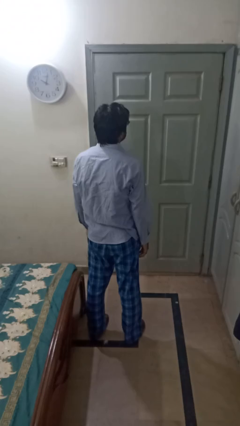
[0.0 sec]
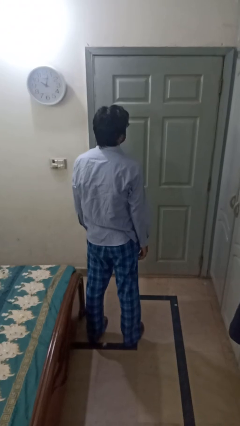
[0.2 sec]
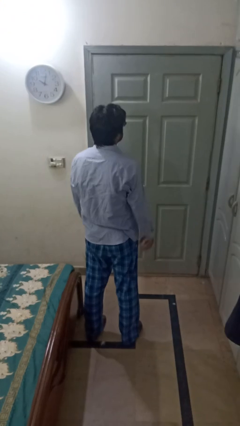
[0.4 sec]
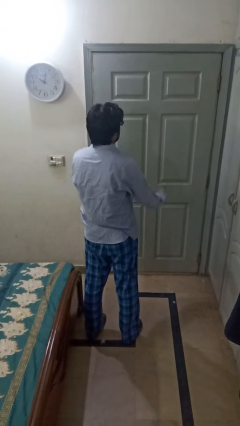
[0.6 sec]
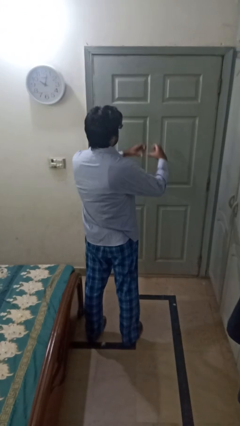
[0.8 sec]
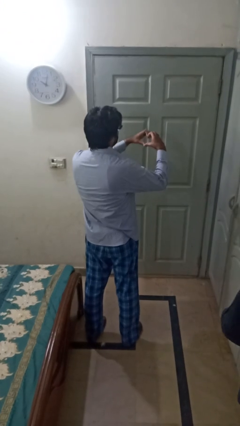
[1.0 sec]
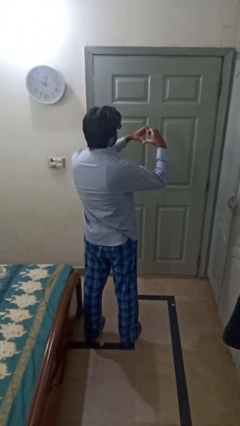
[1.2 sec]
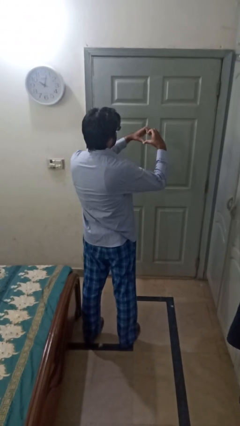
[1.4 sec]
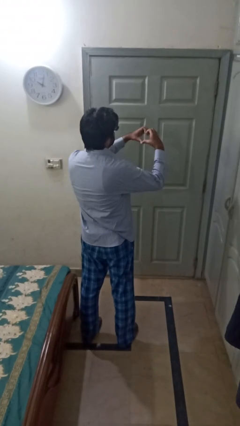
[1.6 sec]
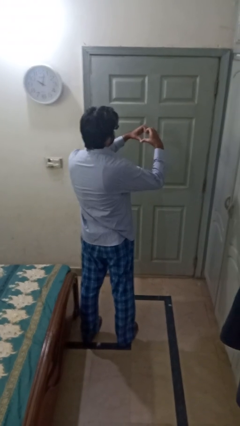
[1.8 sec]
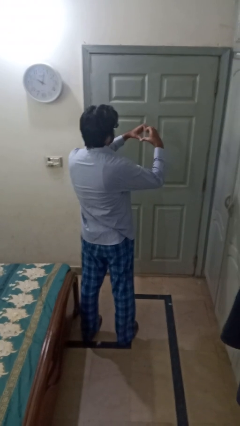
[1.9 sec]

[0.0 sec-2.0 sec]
person gestures heart

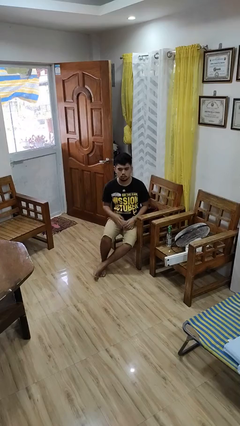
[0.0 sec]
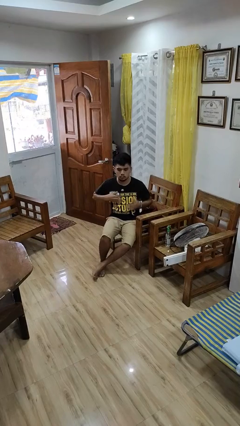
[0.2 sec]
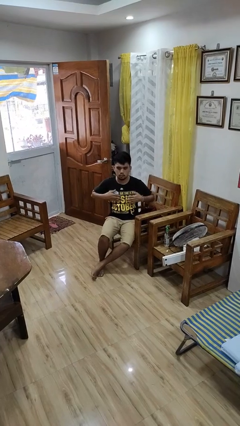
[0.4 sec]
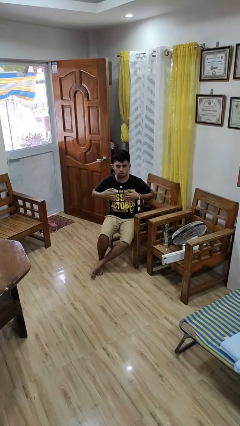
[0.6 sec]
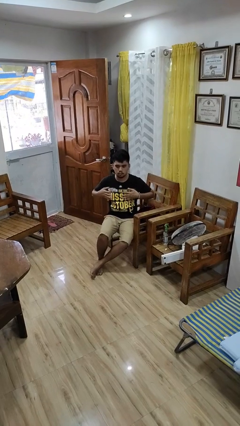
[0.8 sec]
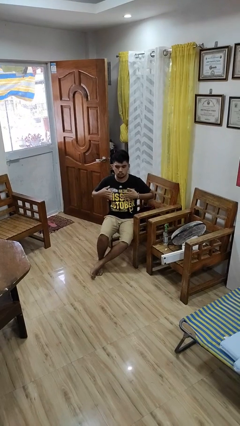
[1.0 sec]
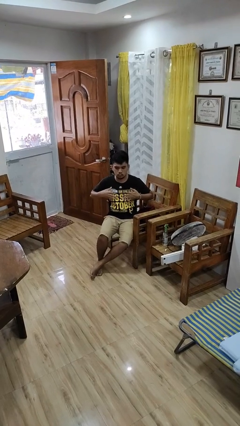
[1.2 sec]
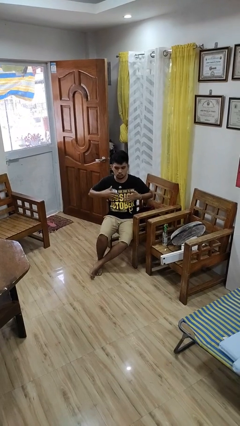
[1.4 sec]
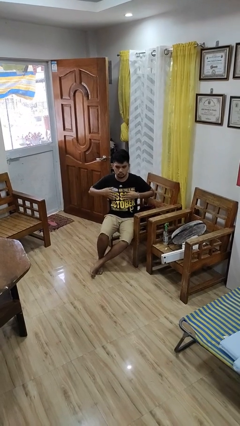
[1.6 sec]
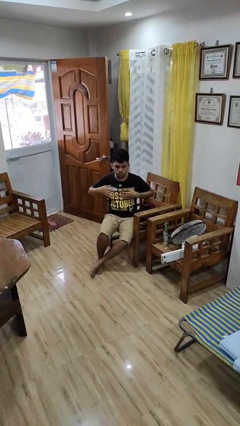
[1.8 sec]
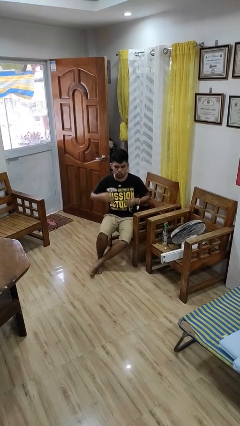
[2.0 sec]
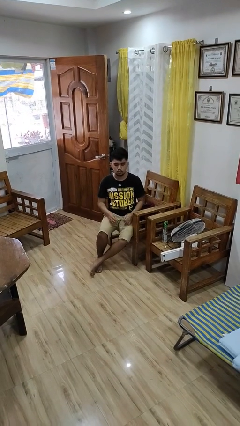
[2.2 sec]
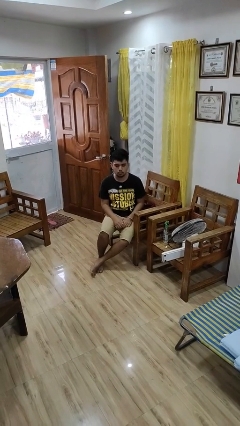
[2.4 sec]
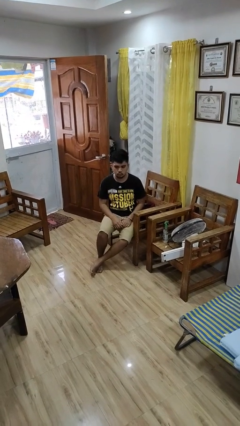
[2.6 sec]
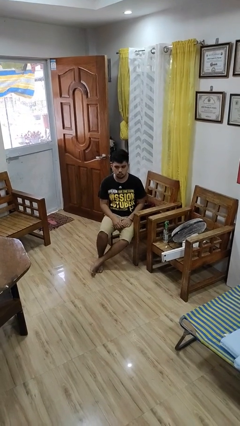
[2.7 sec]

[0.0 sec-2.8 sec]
person drums on chest

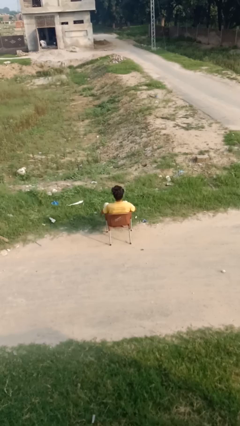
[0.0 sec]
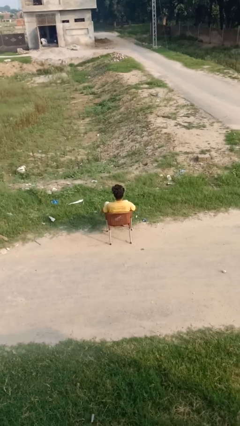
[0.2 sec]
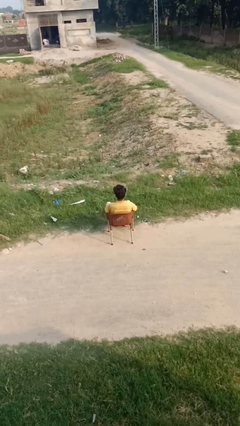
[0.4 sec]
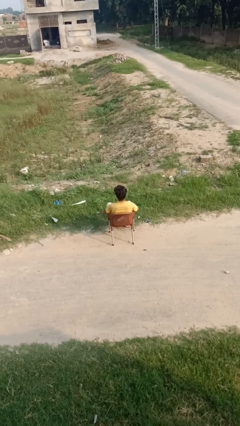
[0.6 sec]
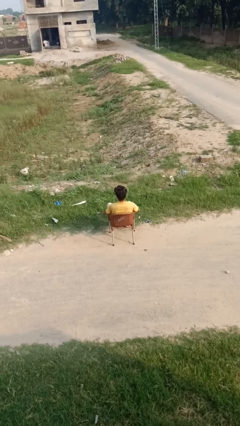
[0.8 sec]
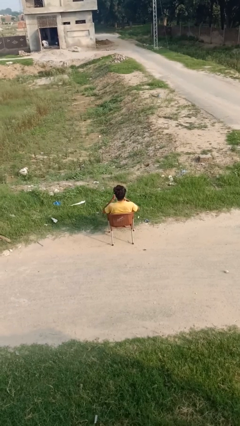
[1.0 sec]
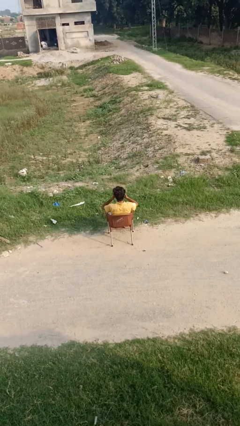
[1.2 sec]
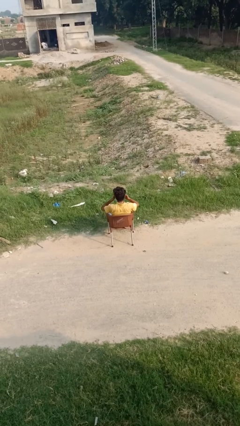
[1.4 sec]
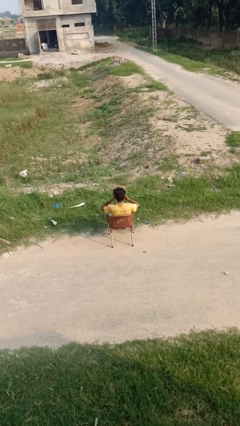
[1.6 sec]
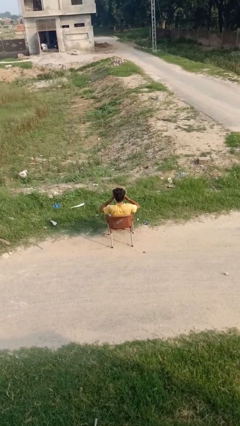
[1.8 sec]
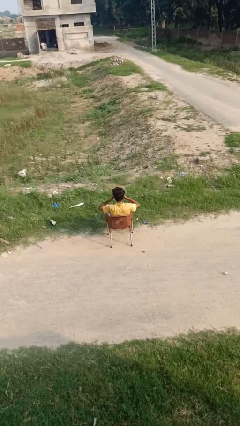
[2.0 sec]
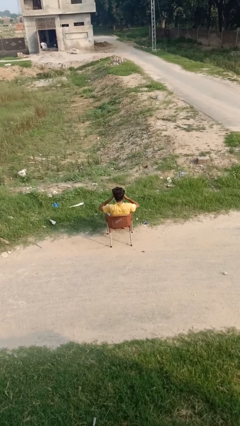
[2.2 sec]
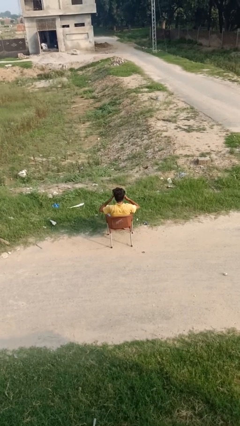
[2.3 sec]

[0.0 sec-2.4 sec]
person rubs eyes

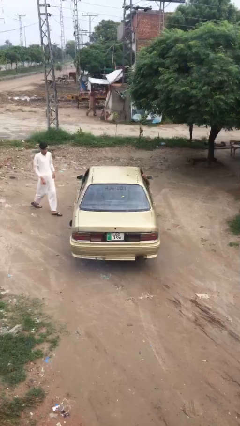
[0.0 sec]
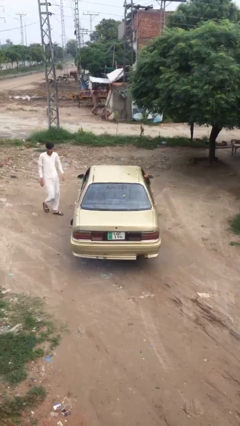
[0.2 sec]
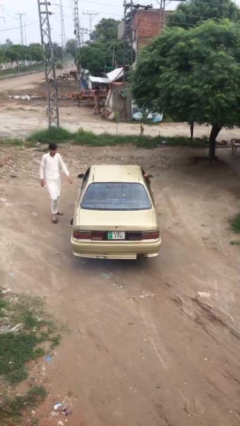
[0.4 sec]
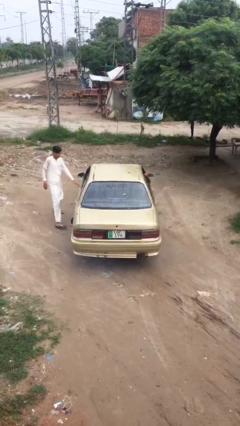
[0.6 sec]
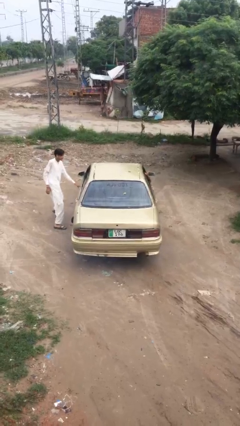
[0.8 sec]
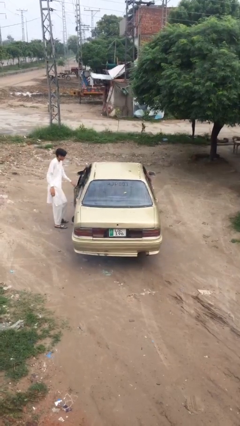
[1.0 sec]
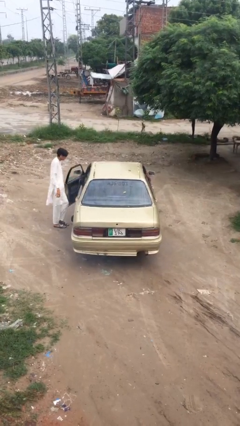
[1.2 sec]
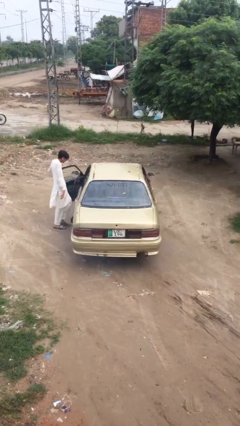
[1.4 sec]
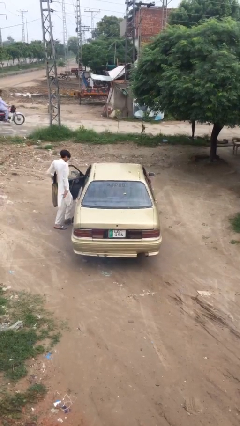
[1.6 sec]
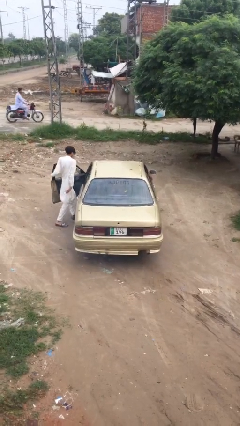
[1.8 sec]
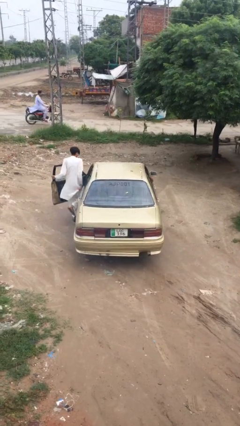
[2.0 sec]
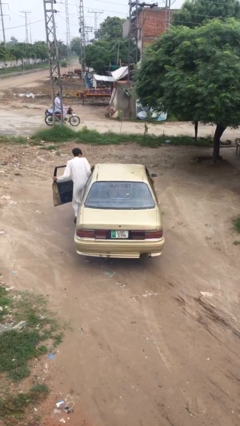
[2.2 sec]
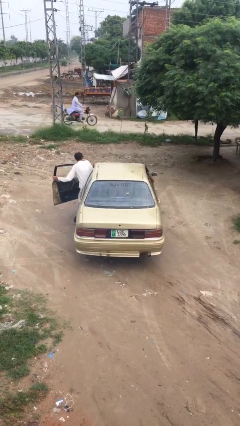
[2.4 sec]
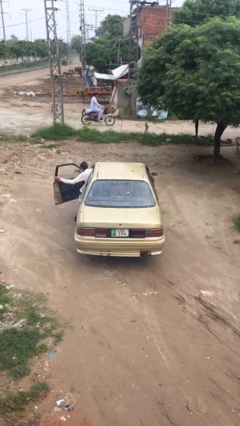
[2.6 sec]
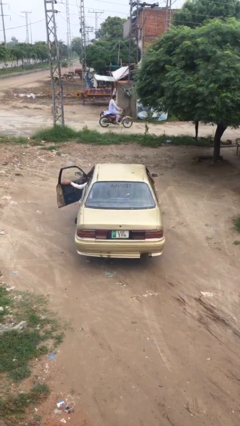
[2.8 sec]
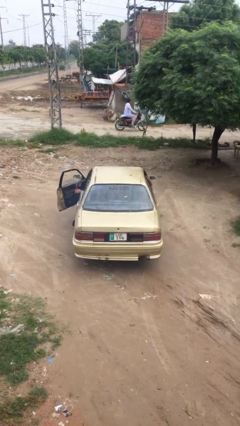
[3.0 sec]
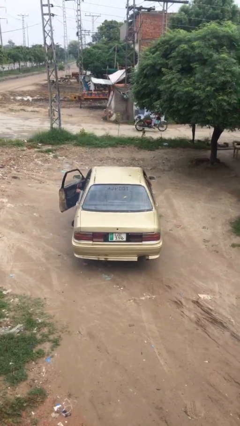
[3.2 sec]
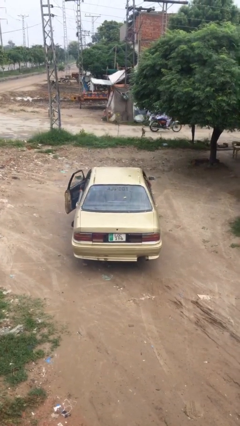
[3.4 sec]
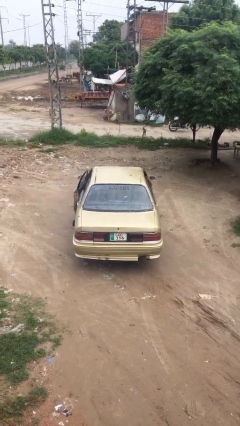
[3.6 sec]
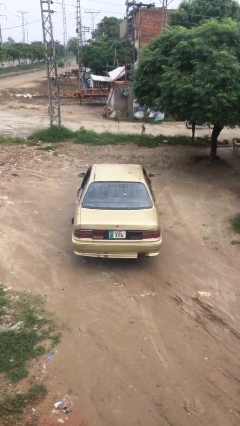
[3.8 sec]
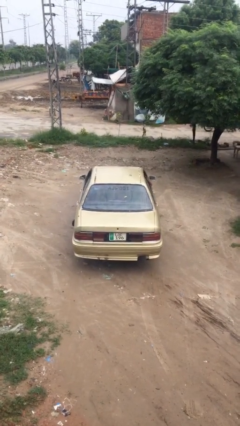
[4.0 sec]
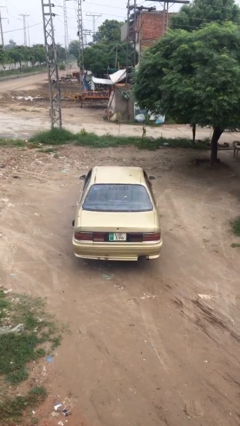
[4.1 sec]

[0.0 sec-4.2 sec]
car picks up person

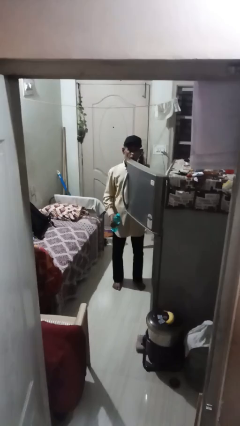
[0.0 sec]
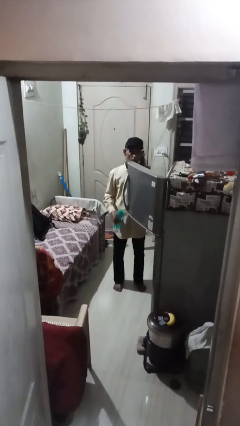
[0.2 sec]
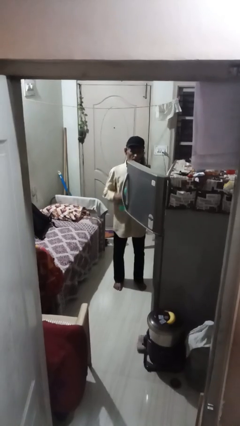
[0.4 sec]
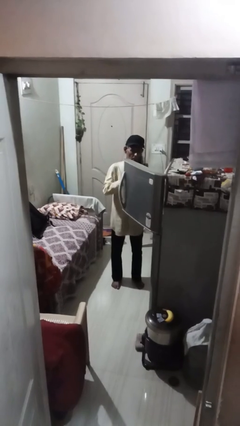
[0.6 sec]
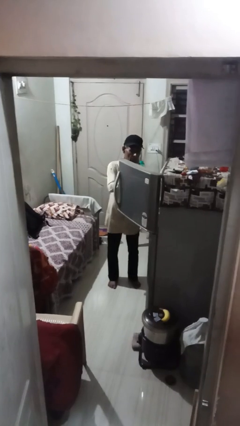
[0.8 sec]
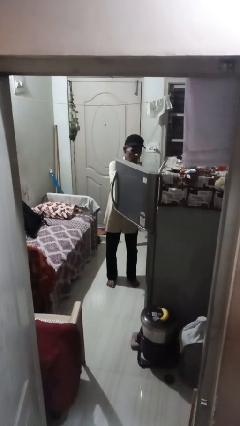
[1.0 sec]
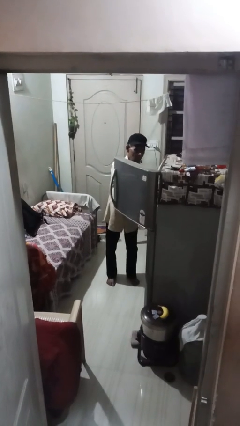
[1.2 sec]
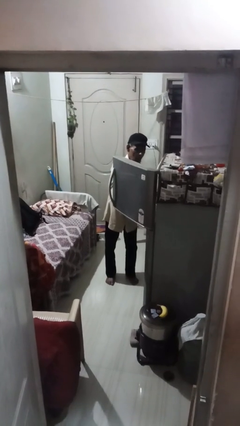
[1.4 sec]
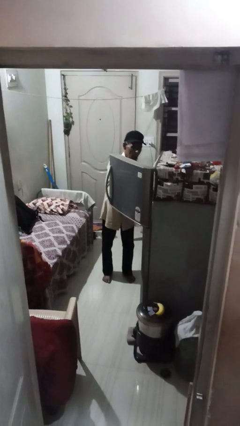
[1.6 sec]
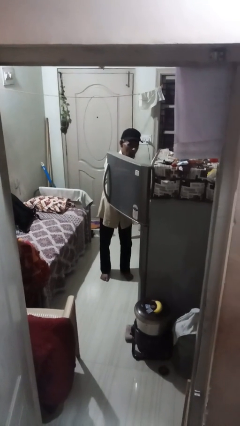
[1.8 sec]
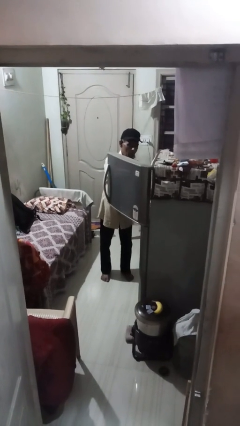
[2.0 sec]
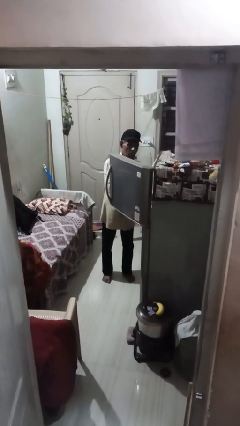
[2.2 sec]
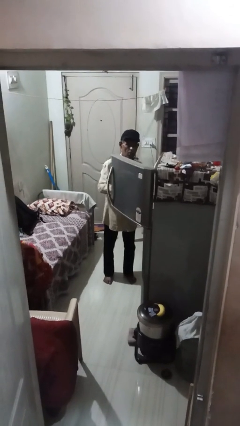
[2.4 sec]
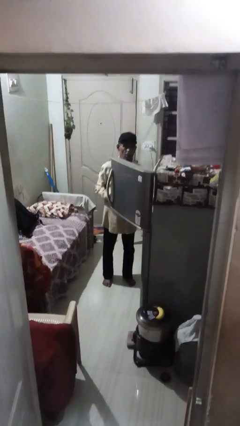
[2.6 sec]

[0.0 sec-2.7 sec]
person puts object into refrigerator

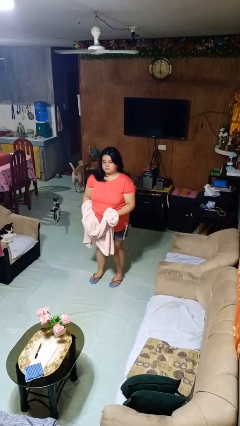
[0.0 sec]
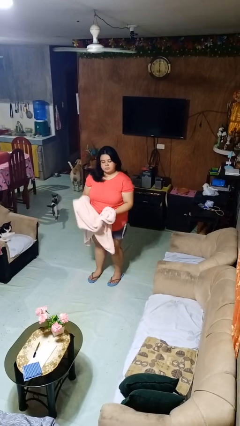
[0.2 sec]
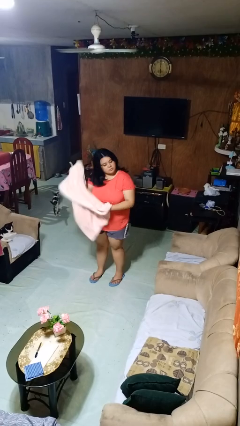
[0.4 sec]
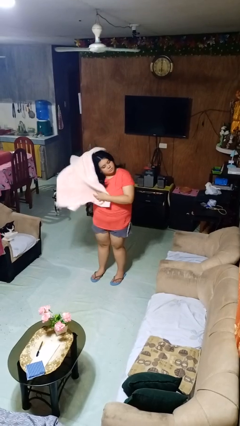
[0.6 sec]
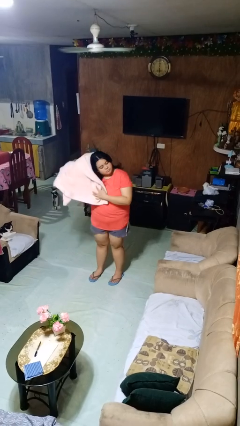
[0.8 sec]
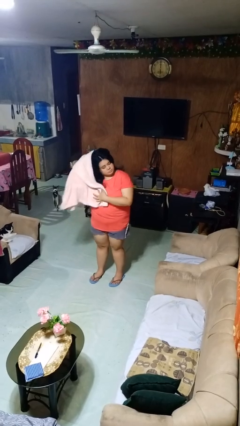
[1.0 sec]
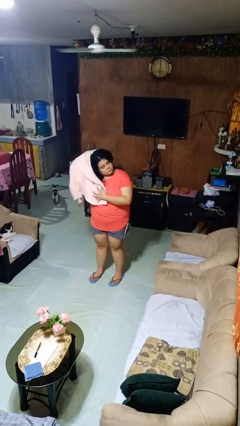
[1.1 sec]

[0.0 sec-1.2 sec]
person dries hair with towel

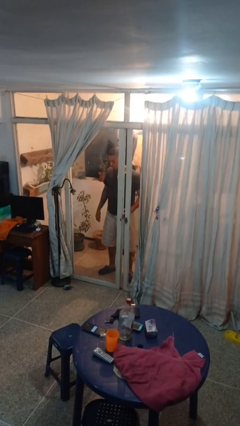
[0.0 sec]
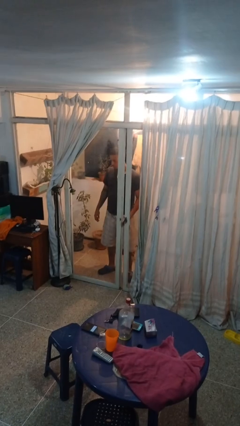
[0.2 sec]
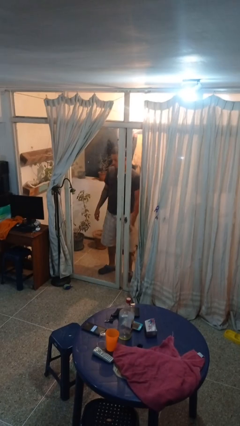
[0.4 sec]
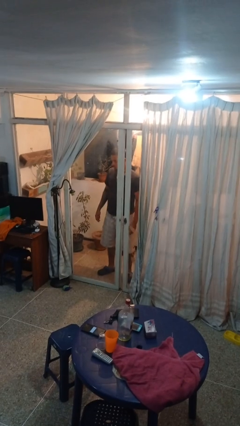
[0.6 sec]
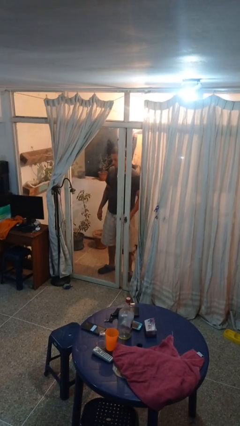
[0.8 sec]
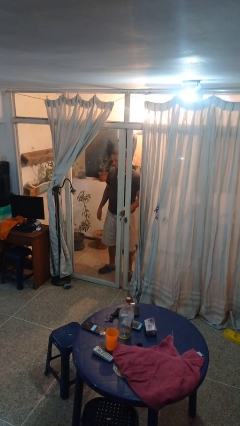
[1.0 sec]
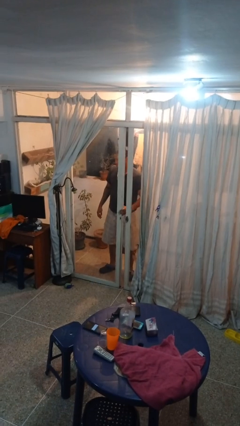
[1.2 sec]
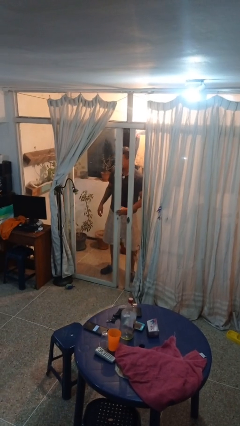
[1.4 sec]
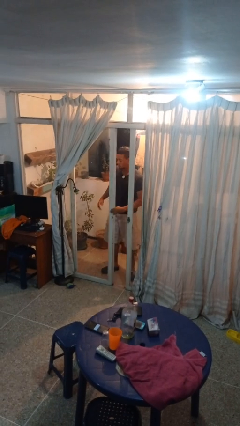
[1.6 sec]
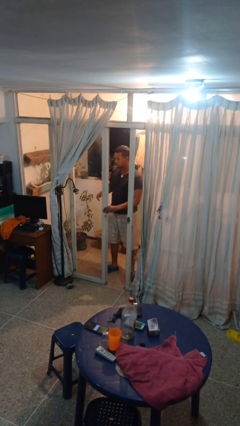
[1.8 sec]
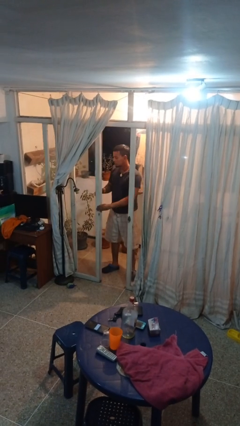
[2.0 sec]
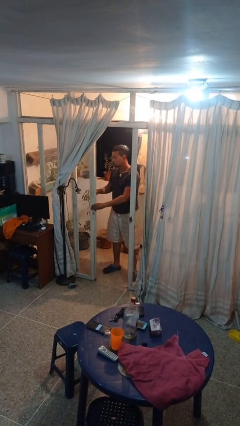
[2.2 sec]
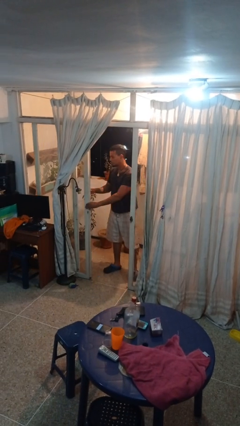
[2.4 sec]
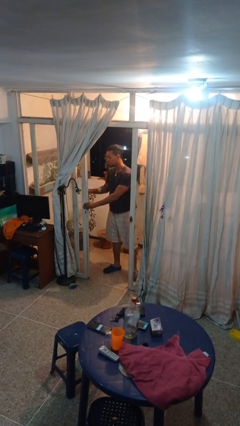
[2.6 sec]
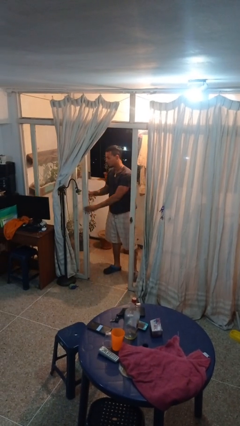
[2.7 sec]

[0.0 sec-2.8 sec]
person opens sliding door
